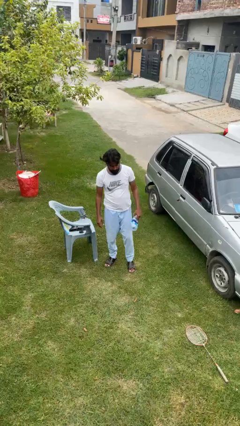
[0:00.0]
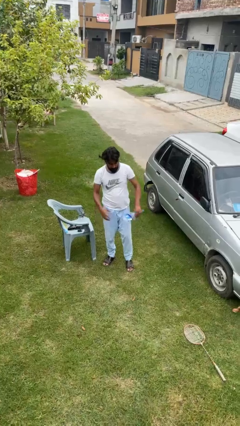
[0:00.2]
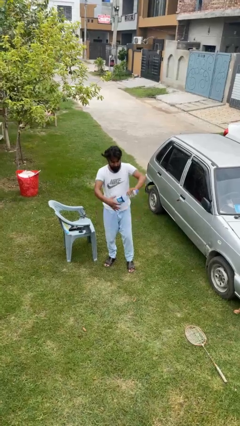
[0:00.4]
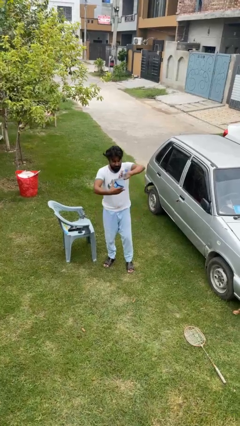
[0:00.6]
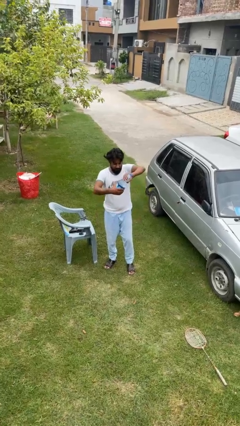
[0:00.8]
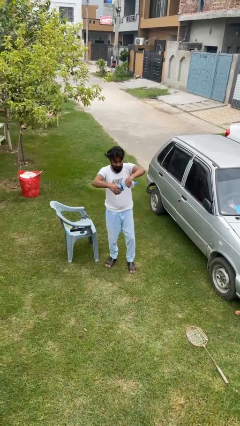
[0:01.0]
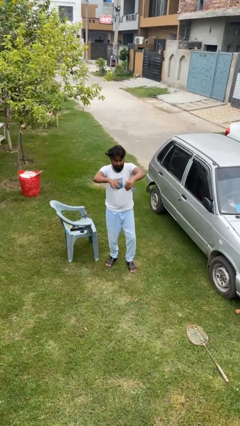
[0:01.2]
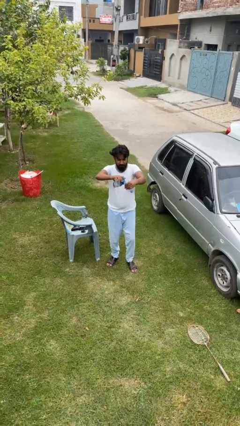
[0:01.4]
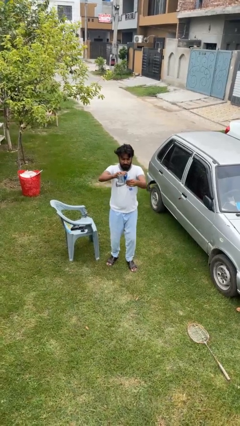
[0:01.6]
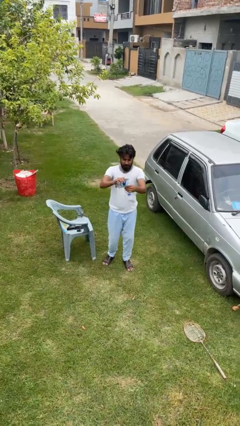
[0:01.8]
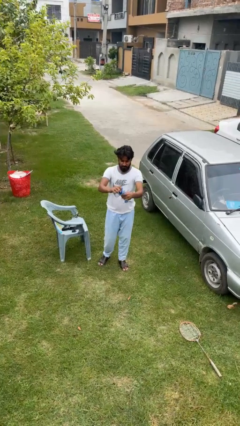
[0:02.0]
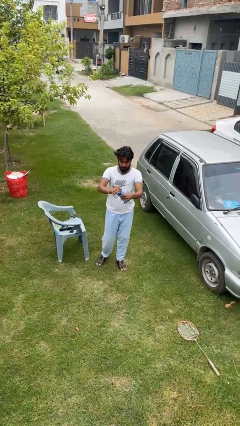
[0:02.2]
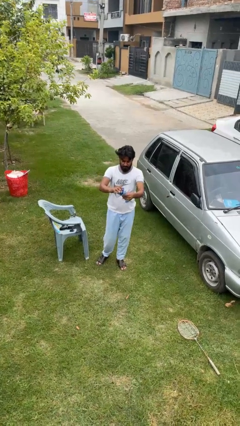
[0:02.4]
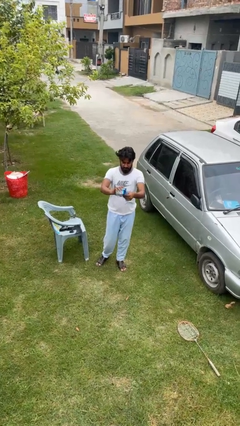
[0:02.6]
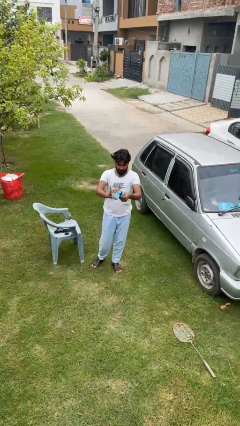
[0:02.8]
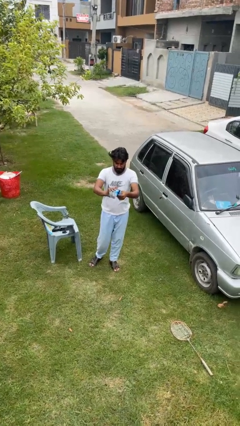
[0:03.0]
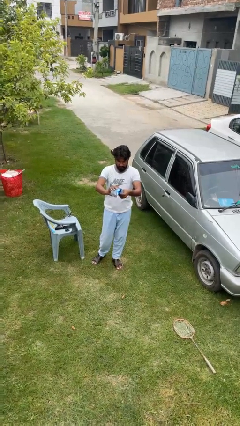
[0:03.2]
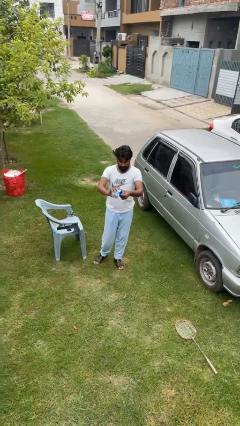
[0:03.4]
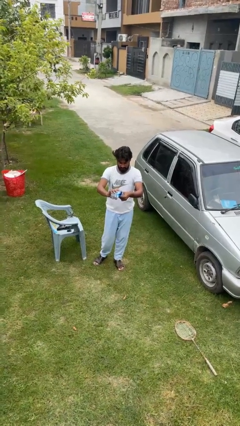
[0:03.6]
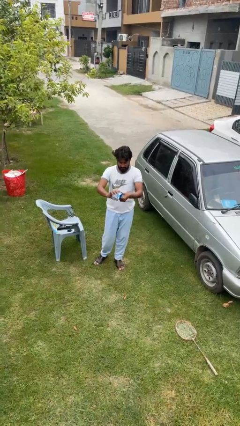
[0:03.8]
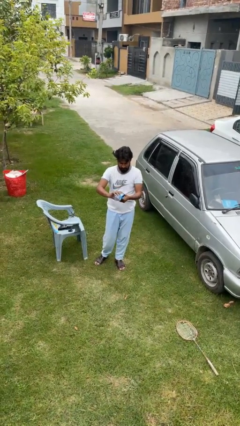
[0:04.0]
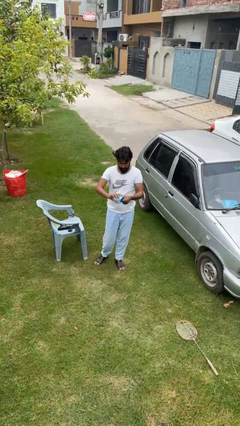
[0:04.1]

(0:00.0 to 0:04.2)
person squeezes object

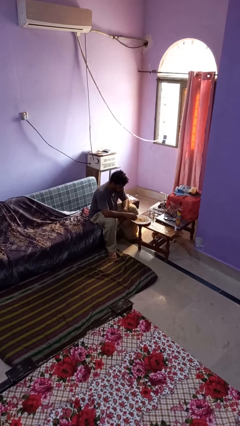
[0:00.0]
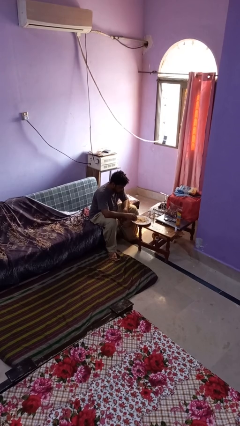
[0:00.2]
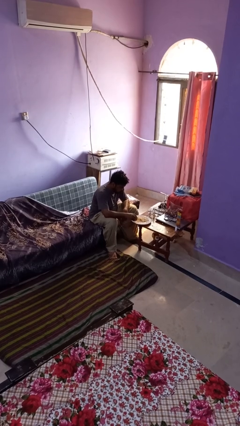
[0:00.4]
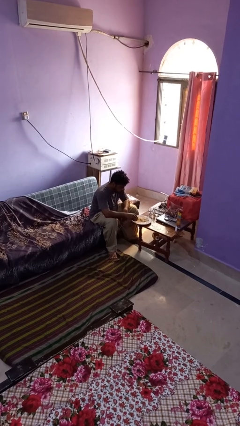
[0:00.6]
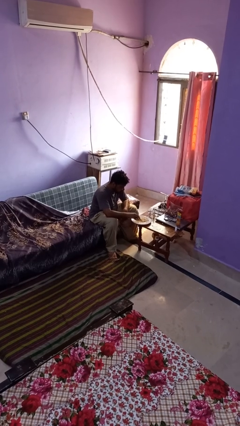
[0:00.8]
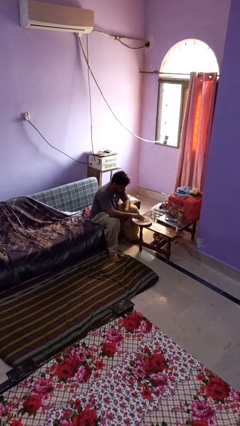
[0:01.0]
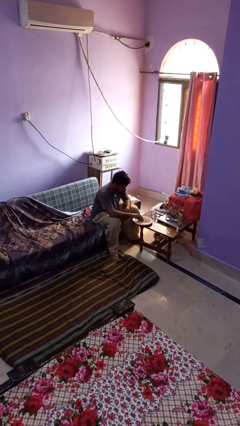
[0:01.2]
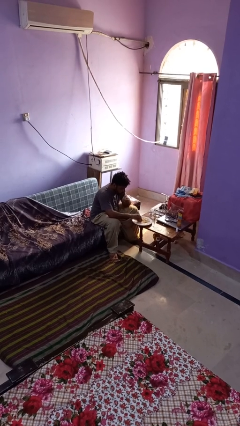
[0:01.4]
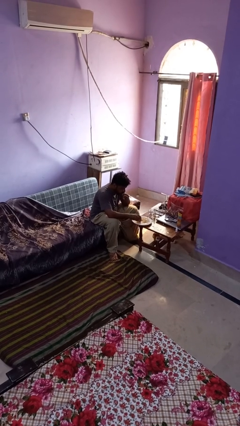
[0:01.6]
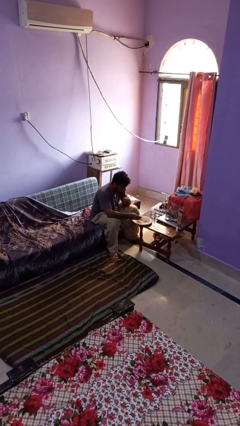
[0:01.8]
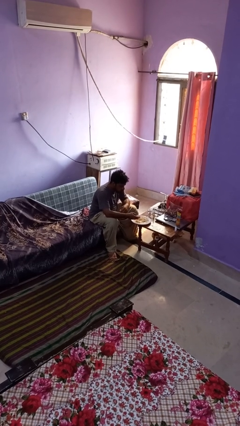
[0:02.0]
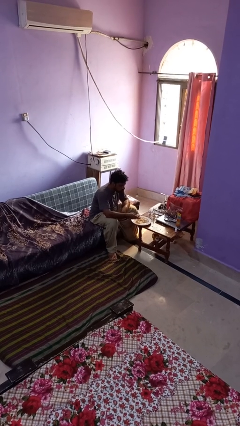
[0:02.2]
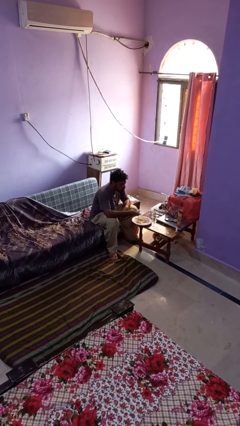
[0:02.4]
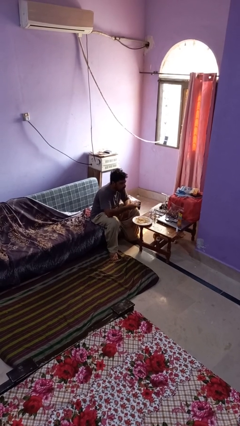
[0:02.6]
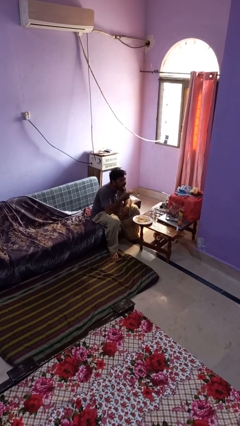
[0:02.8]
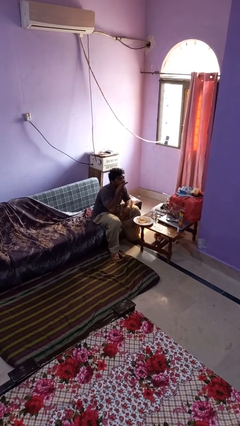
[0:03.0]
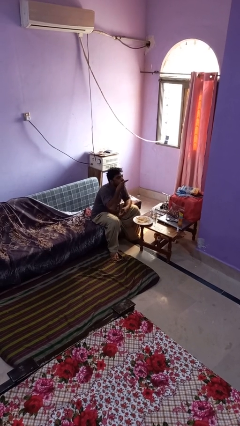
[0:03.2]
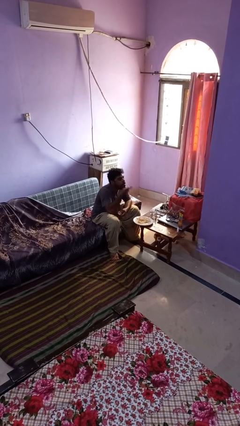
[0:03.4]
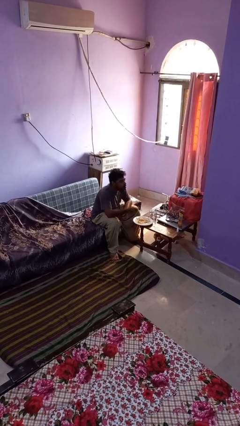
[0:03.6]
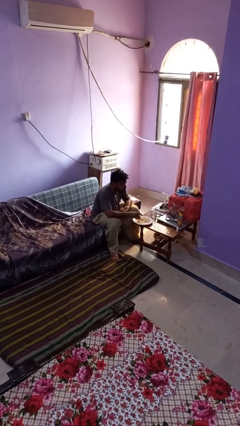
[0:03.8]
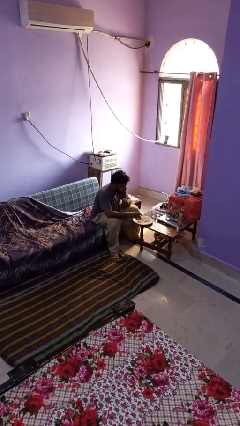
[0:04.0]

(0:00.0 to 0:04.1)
person eats with hands

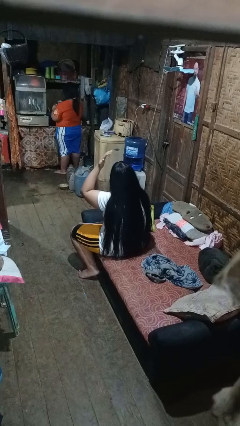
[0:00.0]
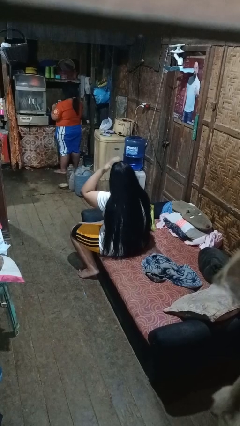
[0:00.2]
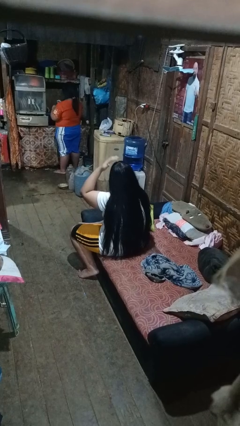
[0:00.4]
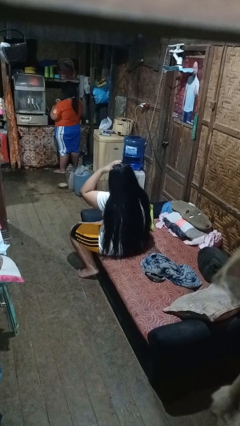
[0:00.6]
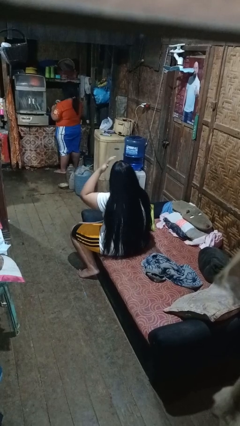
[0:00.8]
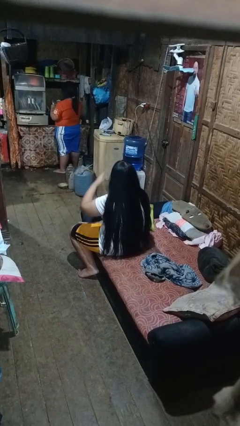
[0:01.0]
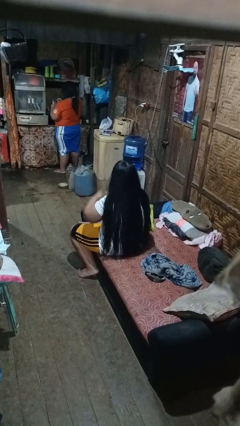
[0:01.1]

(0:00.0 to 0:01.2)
person pats head

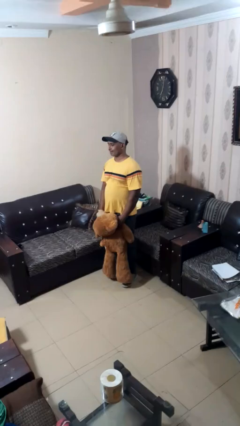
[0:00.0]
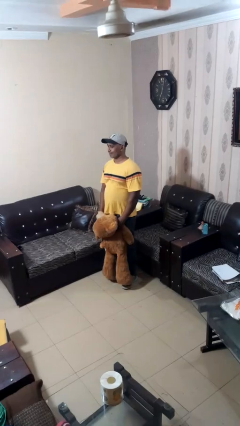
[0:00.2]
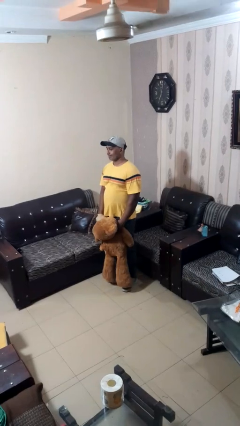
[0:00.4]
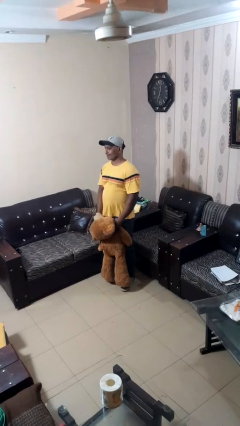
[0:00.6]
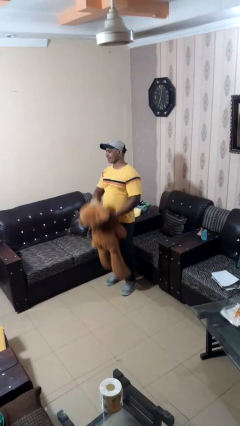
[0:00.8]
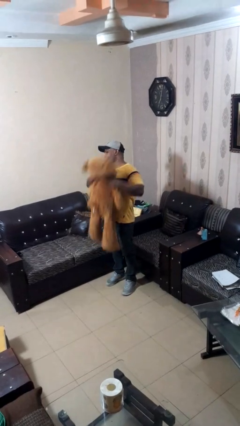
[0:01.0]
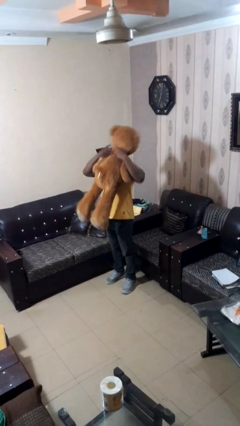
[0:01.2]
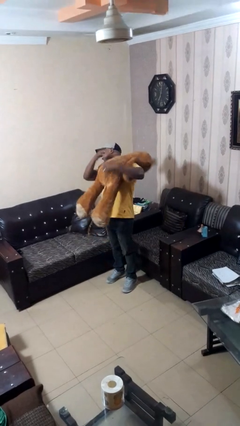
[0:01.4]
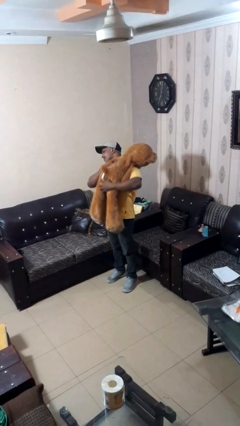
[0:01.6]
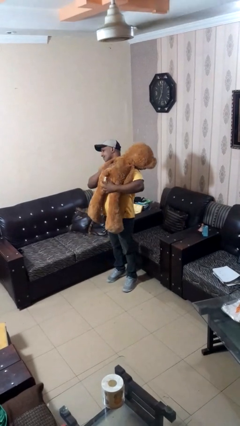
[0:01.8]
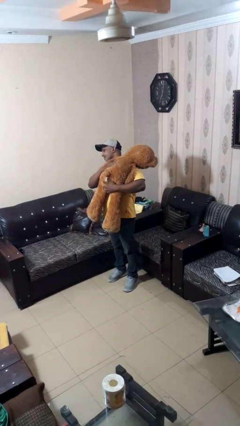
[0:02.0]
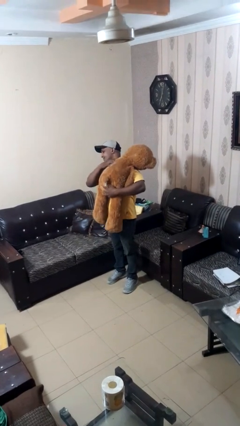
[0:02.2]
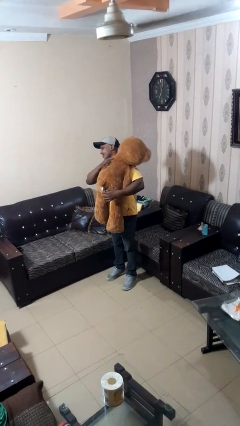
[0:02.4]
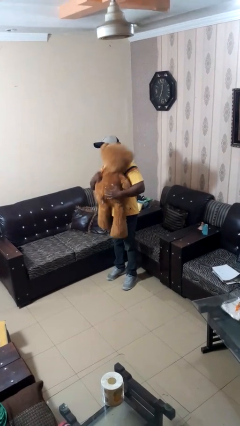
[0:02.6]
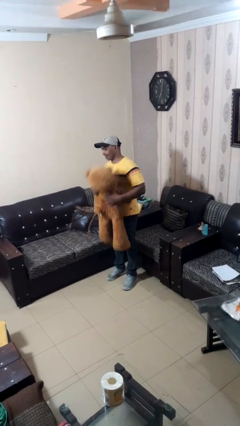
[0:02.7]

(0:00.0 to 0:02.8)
person hugs stuffed animal

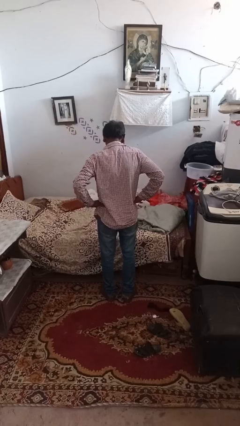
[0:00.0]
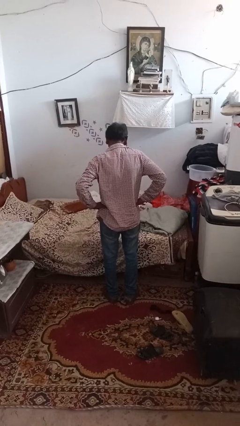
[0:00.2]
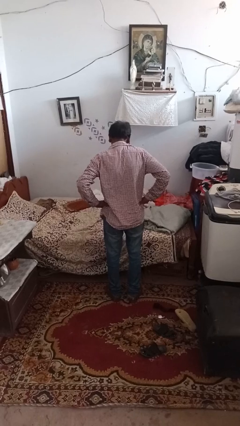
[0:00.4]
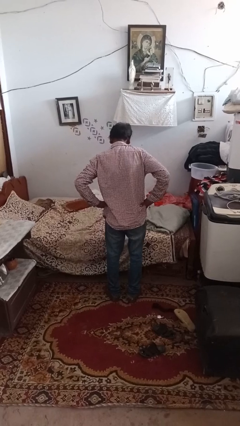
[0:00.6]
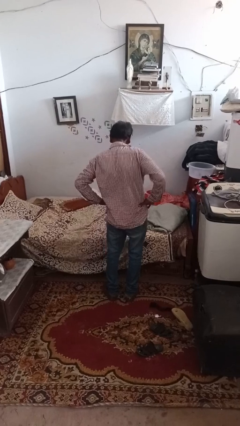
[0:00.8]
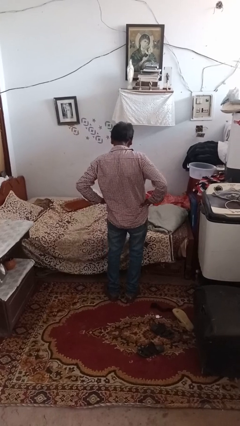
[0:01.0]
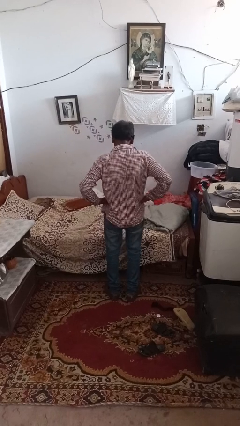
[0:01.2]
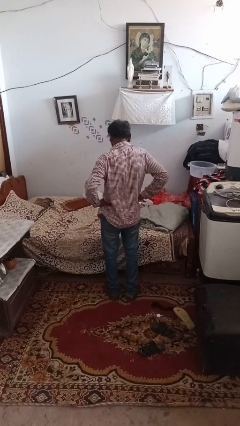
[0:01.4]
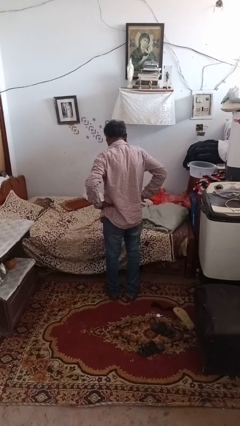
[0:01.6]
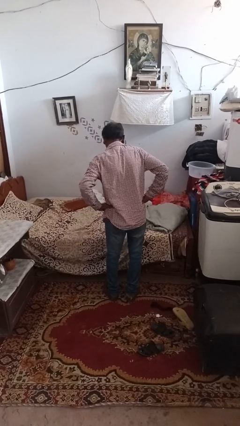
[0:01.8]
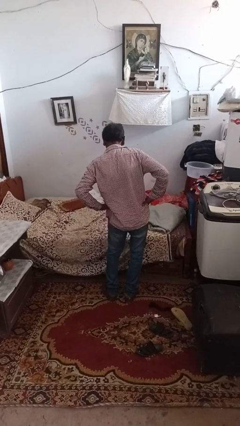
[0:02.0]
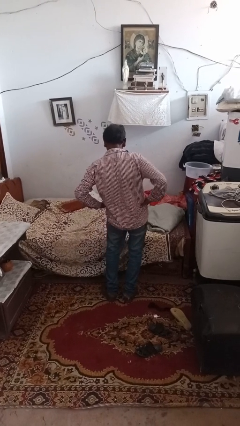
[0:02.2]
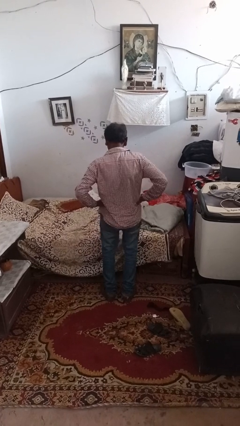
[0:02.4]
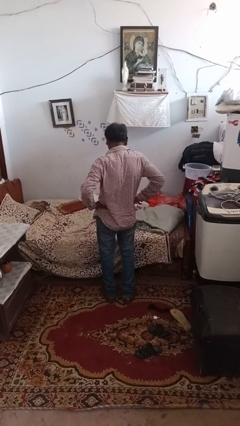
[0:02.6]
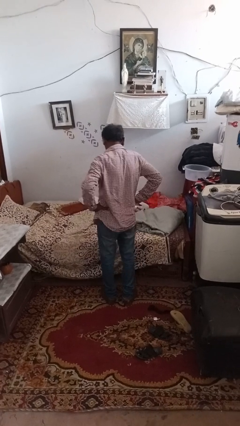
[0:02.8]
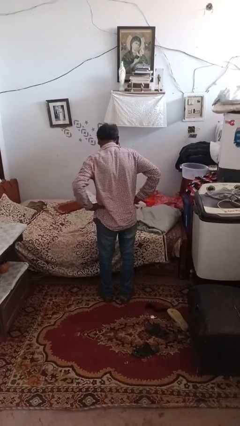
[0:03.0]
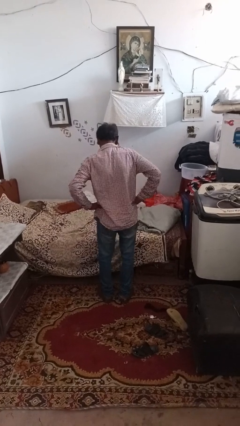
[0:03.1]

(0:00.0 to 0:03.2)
person wiggles hips

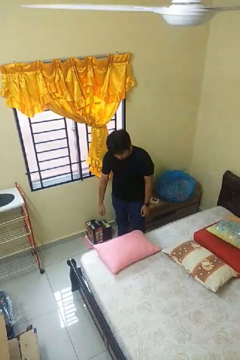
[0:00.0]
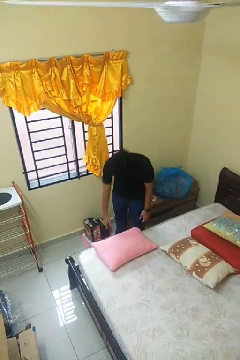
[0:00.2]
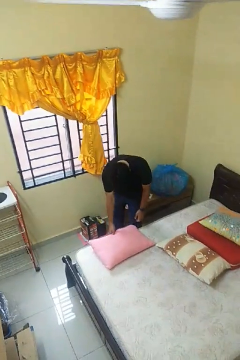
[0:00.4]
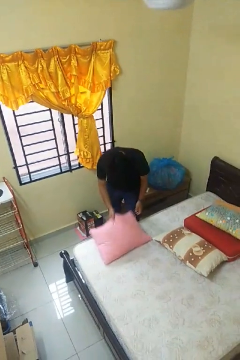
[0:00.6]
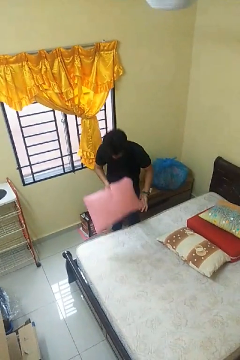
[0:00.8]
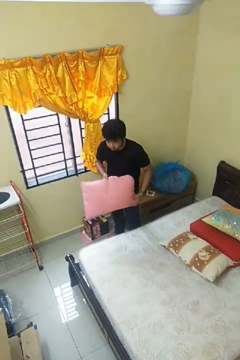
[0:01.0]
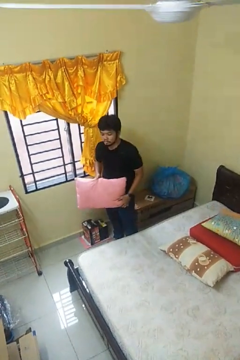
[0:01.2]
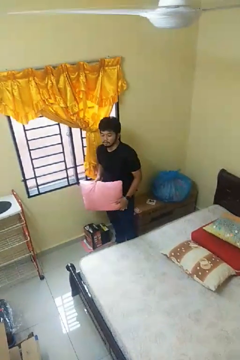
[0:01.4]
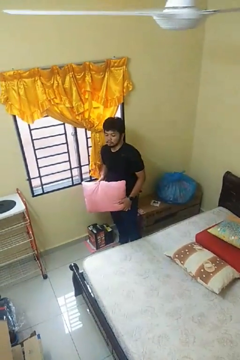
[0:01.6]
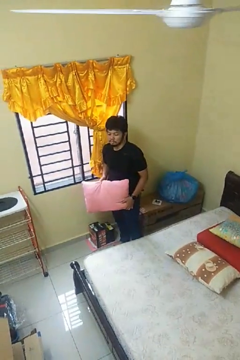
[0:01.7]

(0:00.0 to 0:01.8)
person picks up object from bed

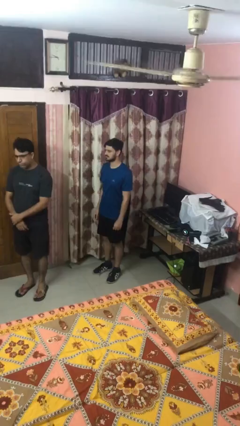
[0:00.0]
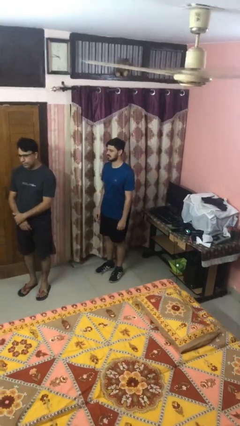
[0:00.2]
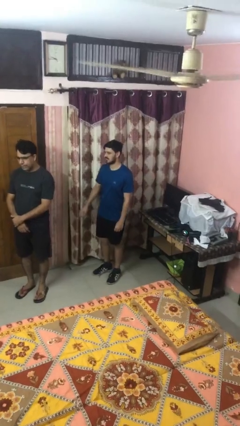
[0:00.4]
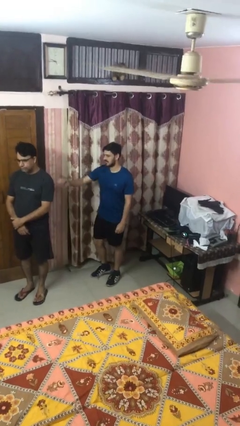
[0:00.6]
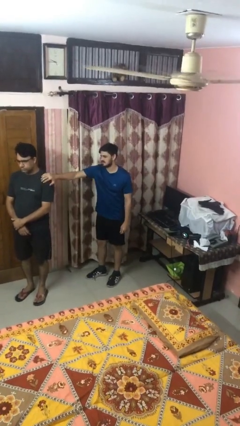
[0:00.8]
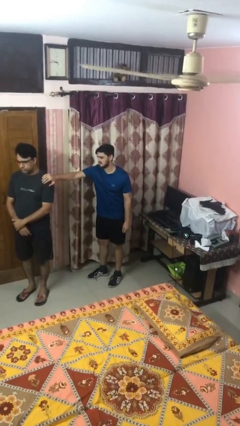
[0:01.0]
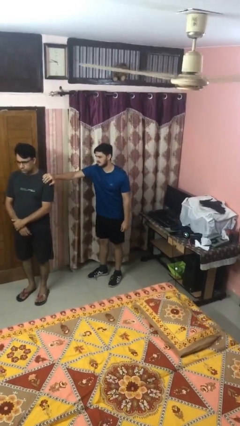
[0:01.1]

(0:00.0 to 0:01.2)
person grabs person by shoulder
